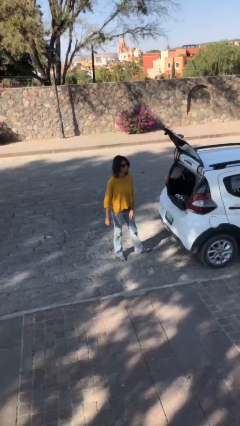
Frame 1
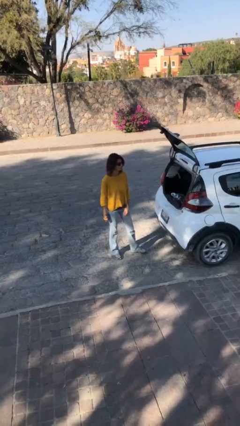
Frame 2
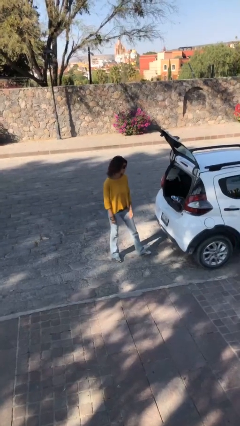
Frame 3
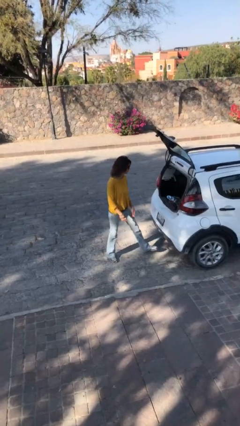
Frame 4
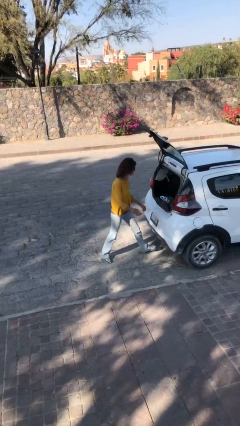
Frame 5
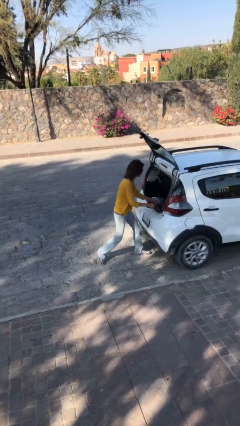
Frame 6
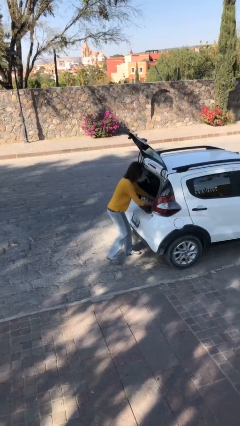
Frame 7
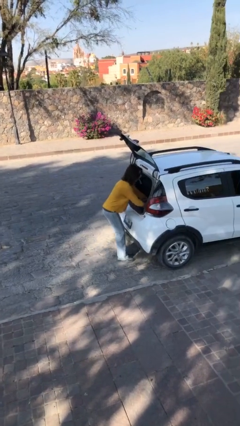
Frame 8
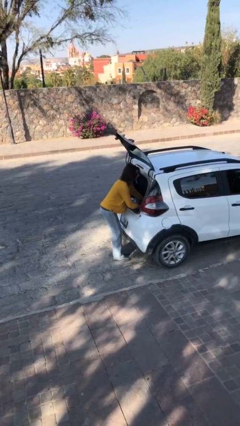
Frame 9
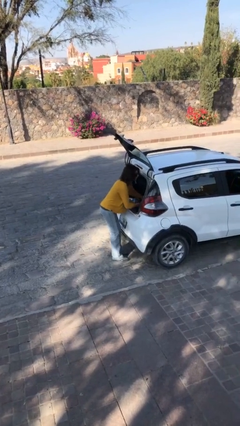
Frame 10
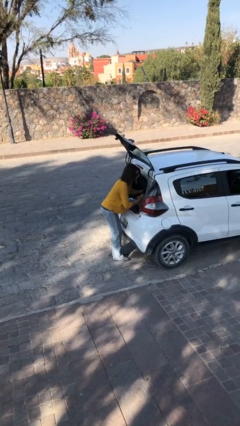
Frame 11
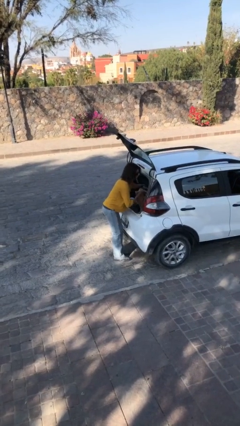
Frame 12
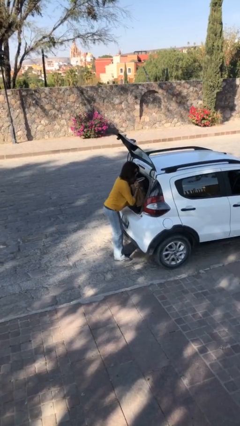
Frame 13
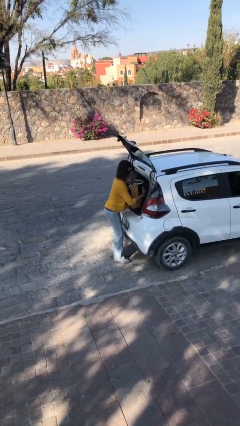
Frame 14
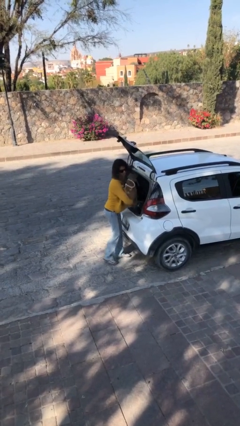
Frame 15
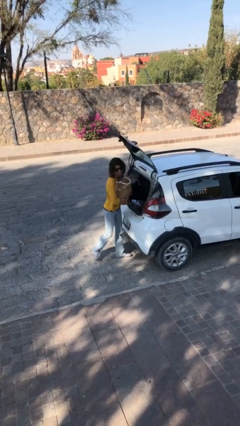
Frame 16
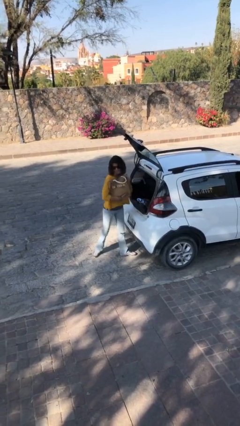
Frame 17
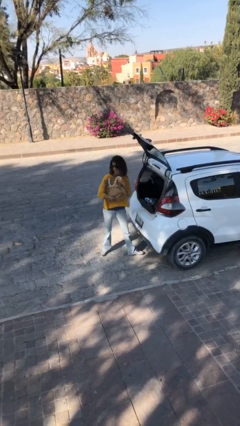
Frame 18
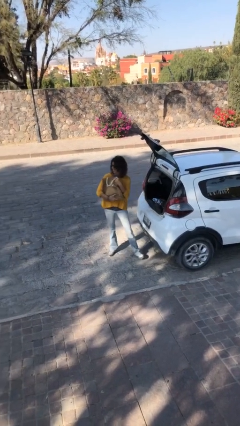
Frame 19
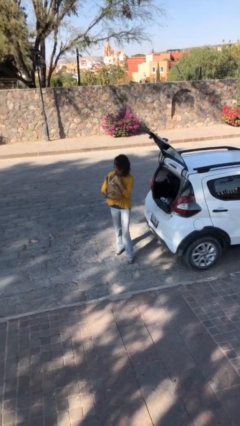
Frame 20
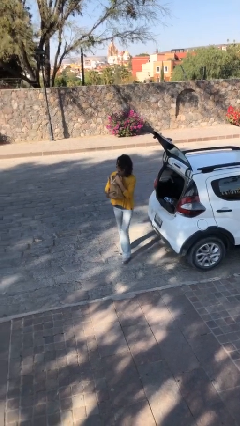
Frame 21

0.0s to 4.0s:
person unloads car

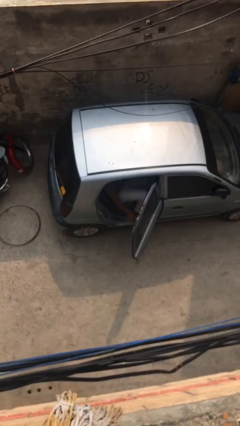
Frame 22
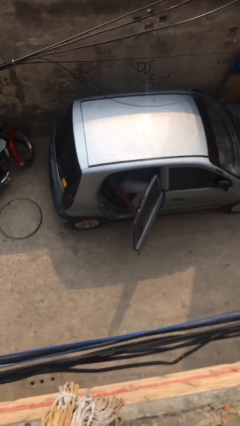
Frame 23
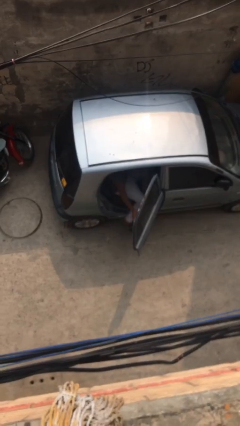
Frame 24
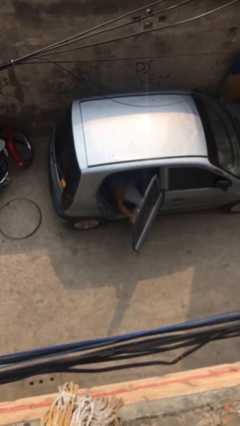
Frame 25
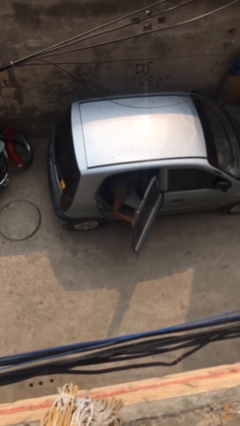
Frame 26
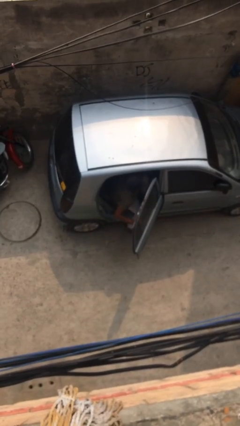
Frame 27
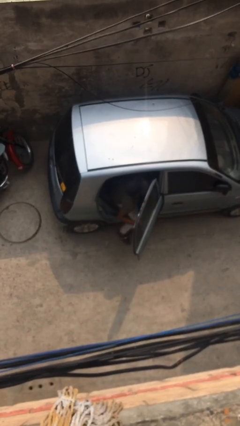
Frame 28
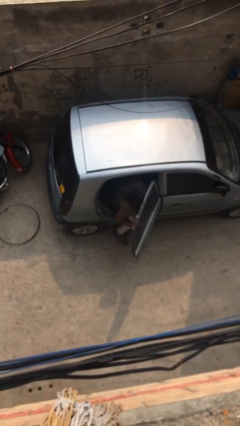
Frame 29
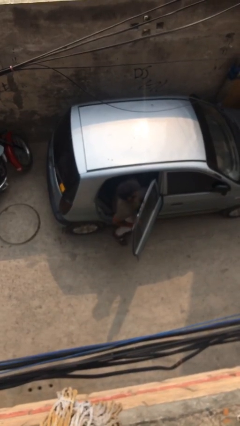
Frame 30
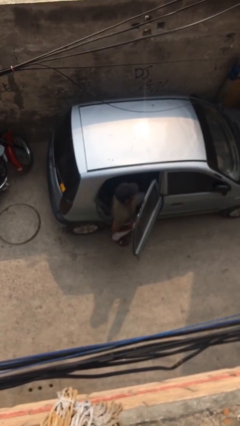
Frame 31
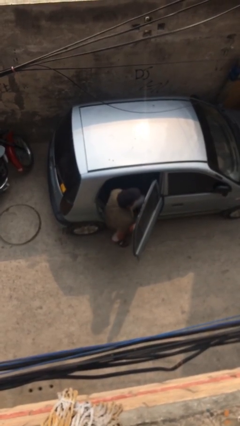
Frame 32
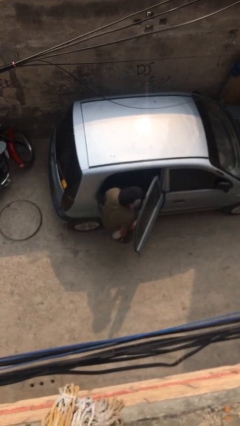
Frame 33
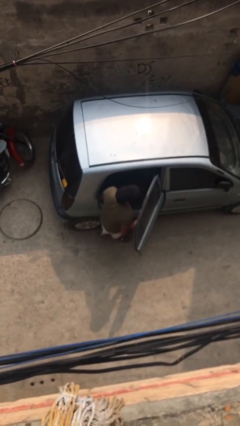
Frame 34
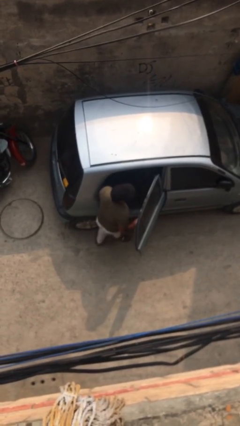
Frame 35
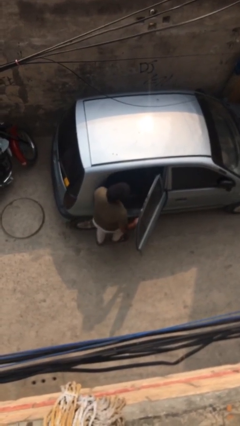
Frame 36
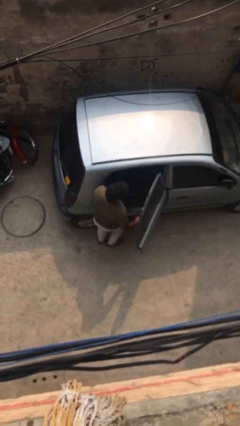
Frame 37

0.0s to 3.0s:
person exits car

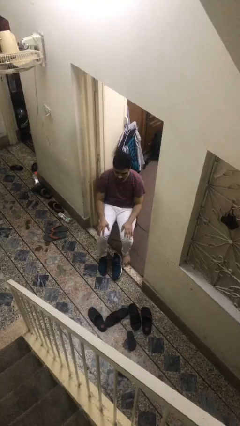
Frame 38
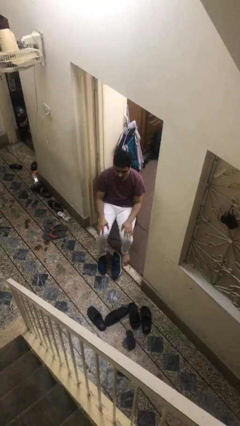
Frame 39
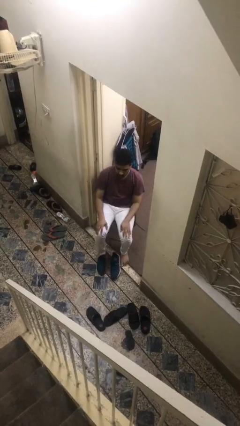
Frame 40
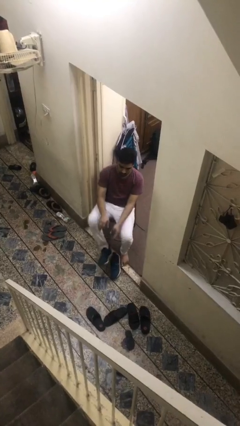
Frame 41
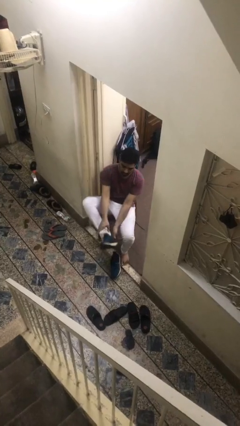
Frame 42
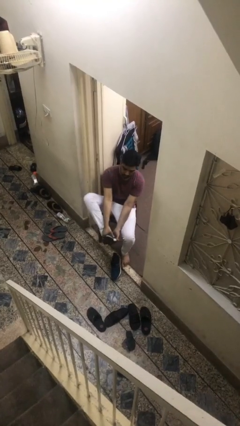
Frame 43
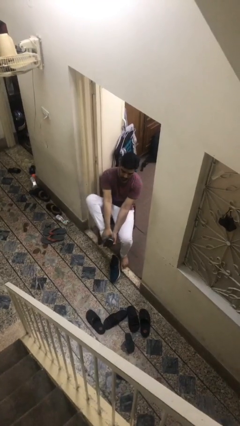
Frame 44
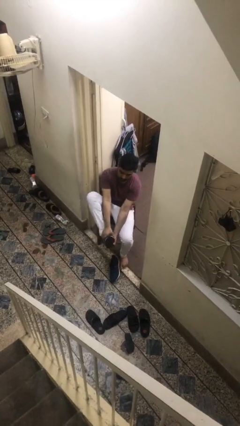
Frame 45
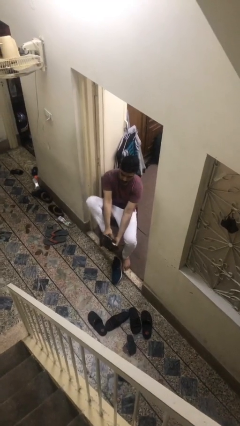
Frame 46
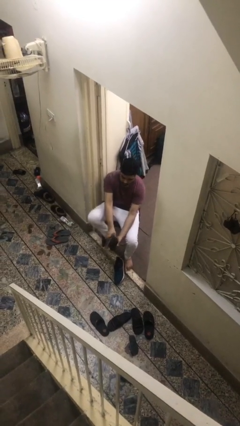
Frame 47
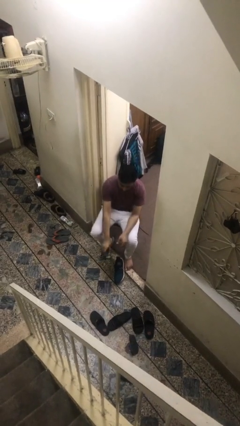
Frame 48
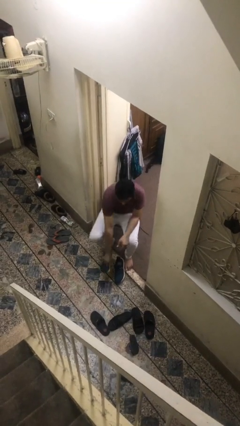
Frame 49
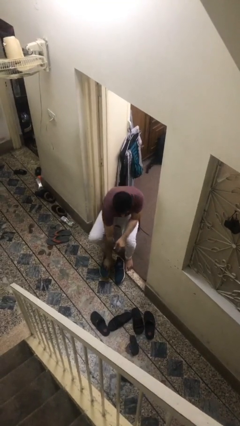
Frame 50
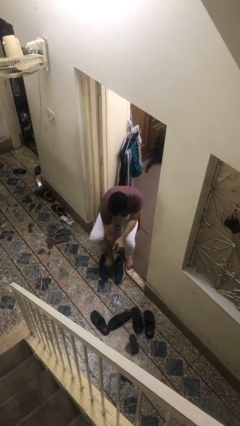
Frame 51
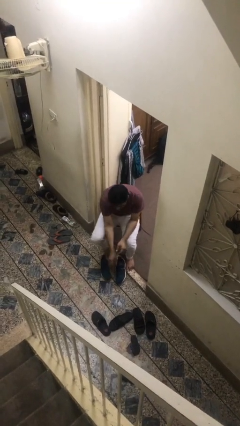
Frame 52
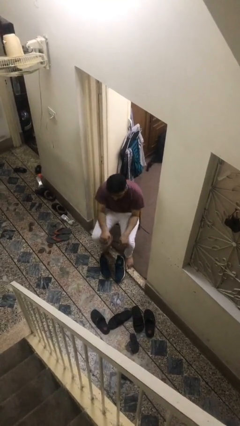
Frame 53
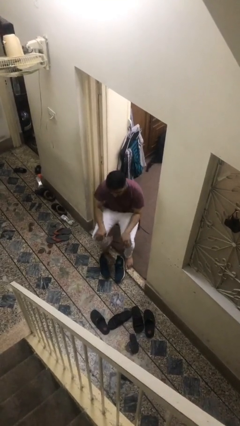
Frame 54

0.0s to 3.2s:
person takes off shoes

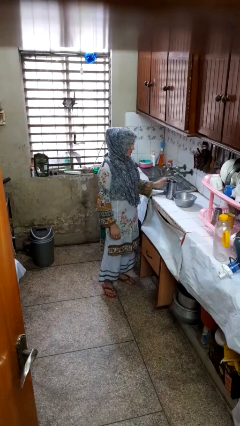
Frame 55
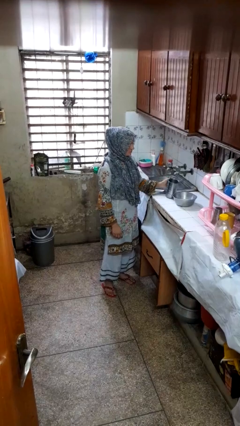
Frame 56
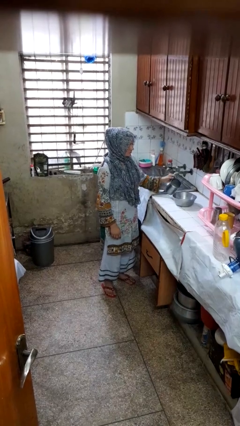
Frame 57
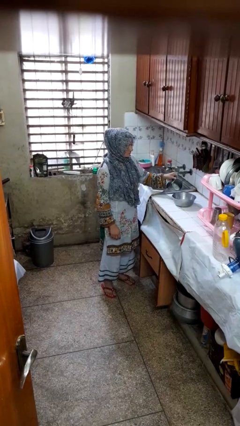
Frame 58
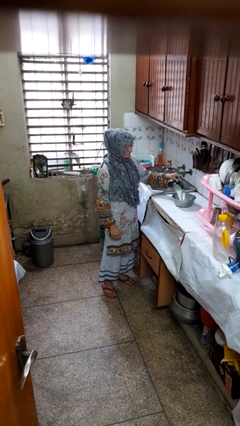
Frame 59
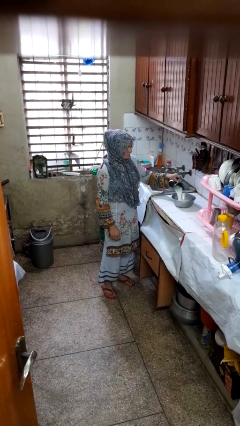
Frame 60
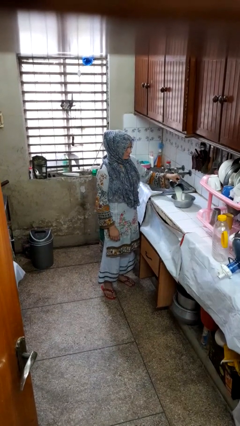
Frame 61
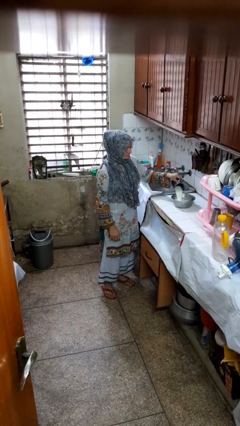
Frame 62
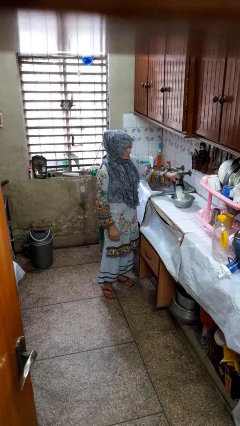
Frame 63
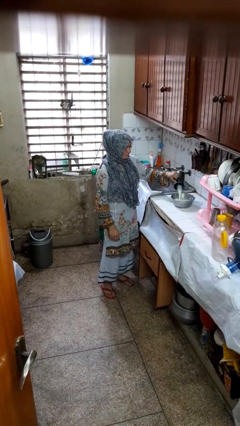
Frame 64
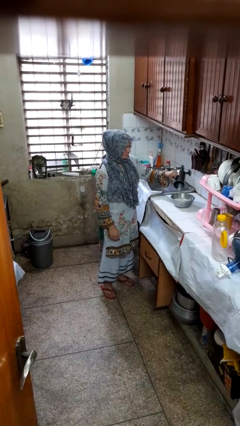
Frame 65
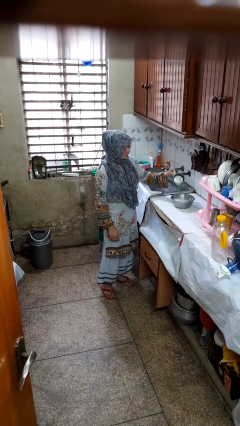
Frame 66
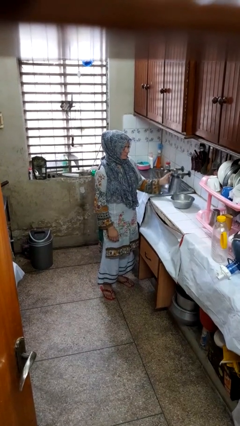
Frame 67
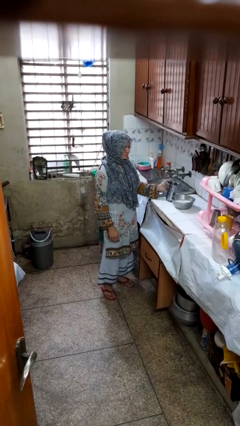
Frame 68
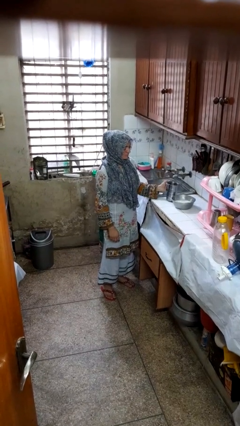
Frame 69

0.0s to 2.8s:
person pours into bowl

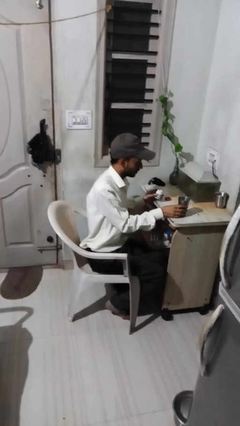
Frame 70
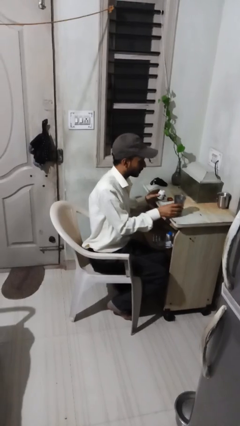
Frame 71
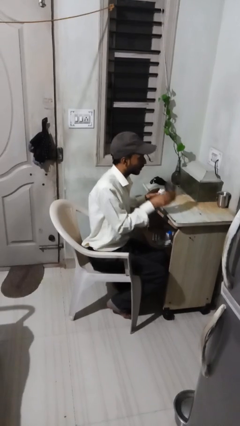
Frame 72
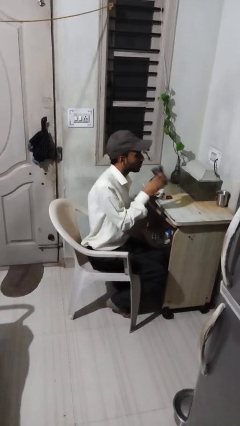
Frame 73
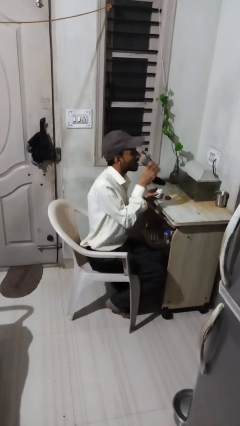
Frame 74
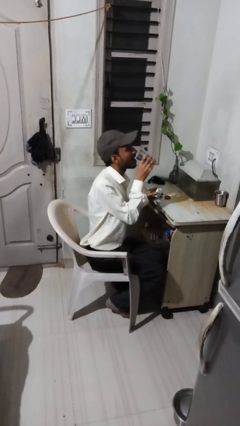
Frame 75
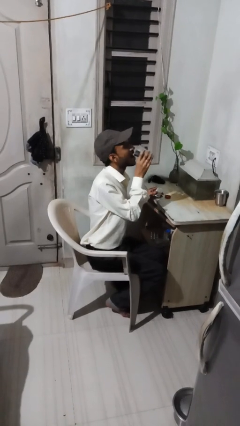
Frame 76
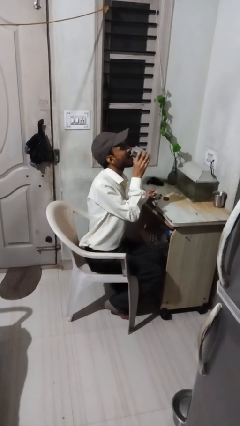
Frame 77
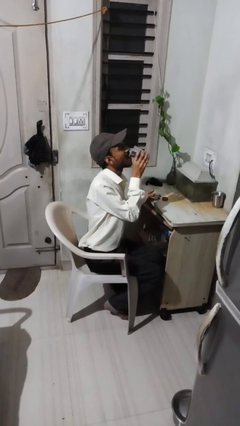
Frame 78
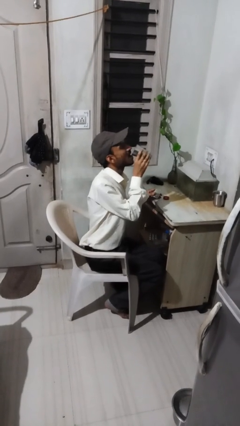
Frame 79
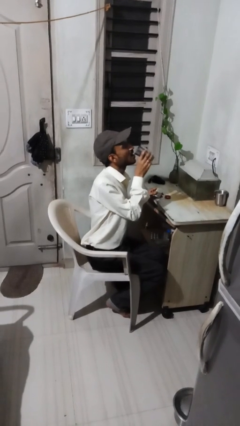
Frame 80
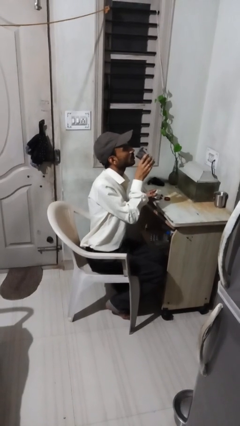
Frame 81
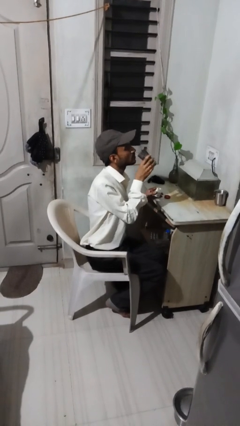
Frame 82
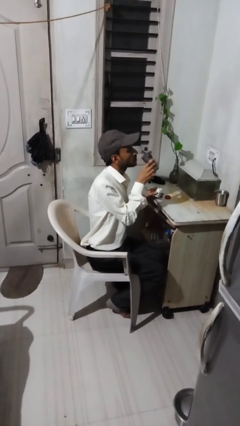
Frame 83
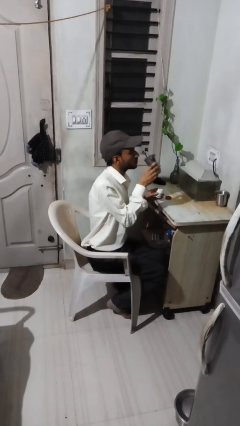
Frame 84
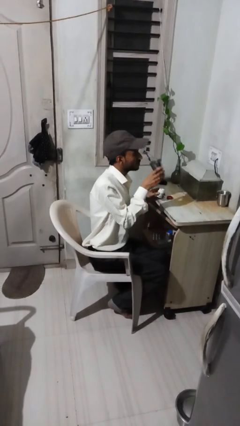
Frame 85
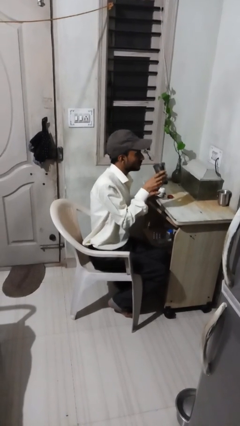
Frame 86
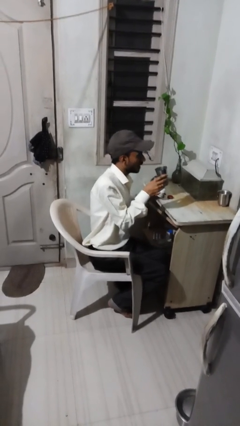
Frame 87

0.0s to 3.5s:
person drinks from cup

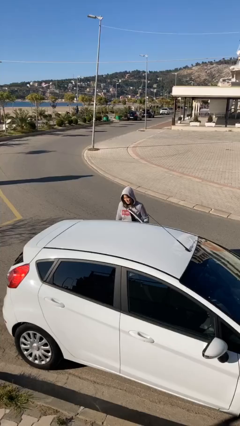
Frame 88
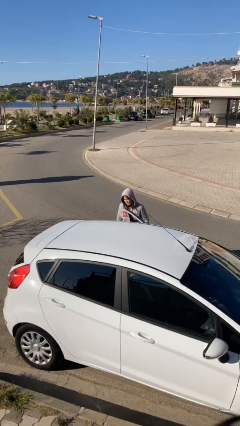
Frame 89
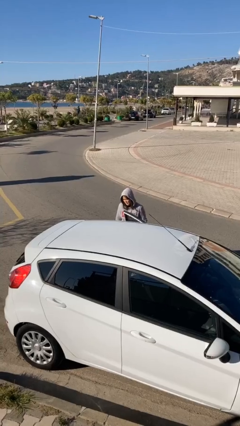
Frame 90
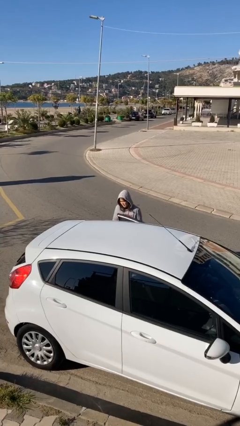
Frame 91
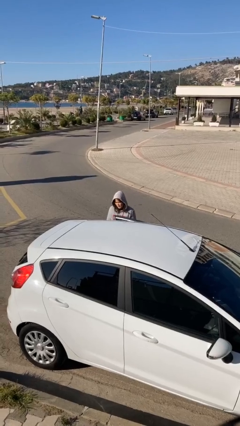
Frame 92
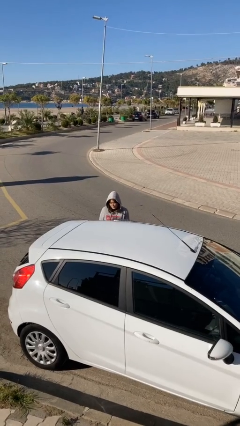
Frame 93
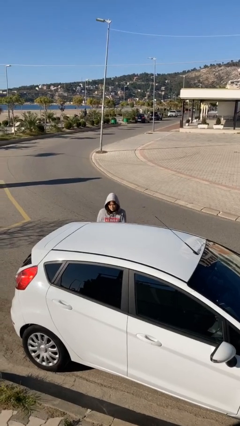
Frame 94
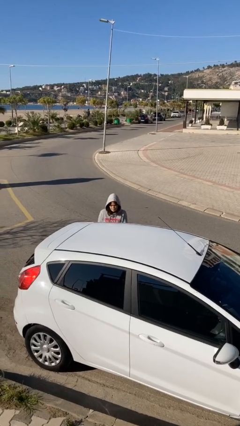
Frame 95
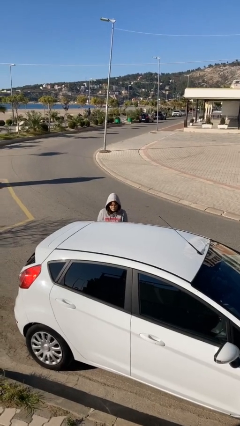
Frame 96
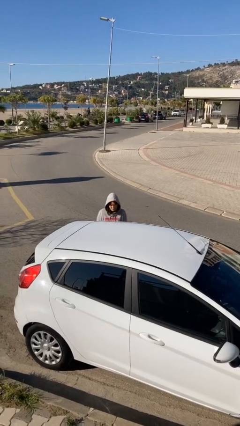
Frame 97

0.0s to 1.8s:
person closes car door
